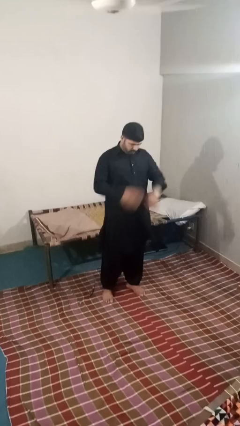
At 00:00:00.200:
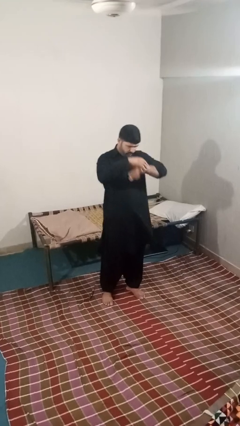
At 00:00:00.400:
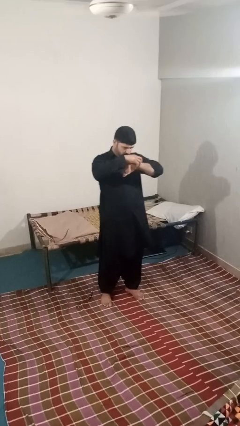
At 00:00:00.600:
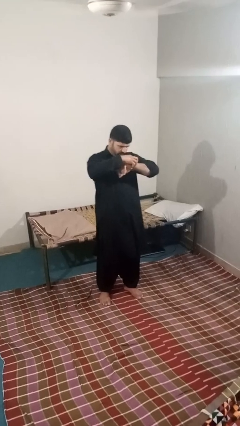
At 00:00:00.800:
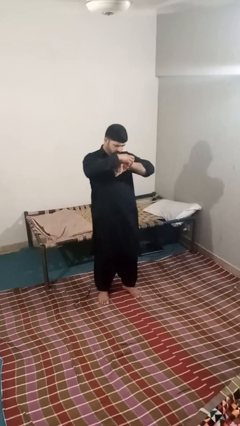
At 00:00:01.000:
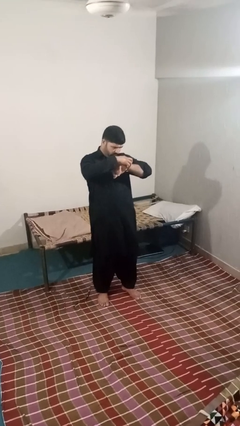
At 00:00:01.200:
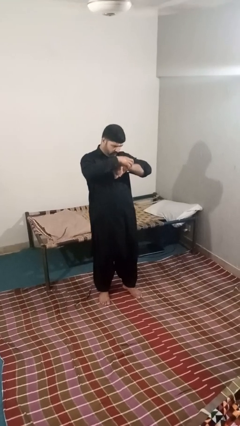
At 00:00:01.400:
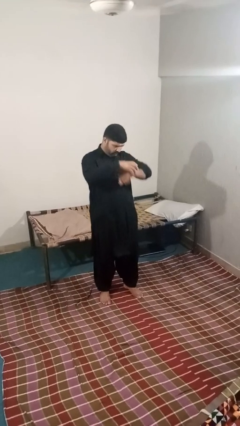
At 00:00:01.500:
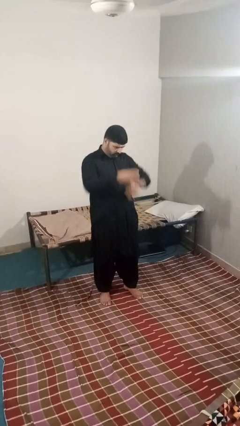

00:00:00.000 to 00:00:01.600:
person looks at wristwatch

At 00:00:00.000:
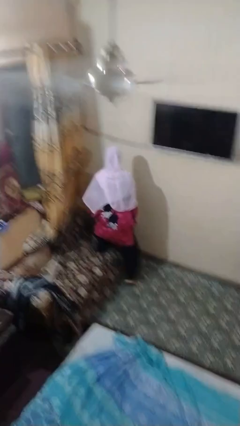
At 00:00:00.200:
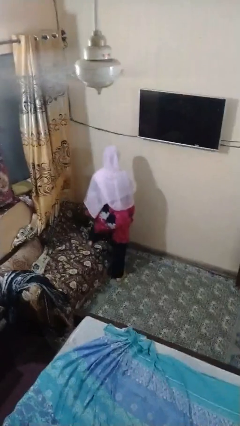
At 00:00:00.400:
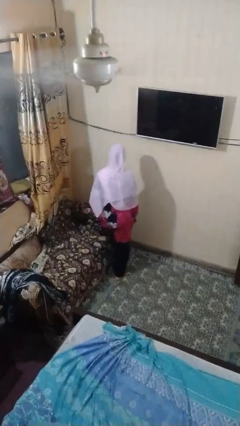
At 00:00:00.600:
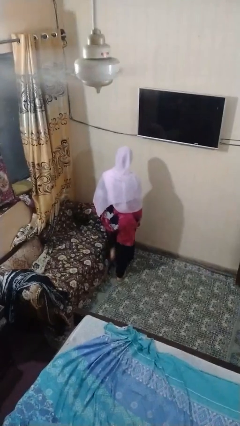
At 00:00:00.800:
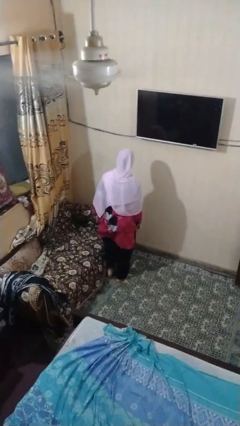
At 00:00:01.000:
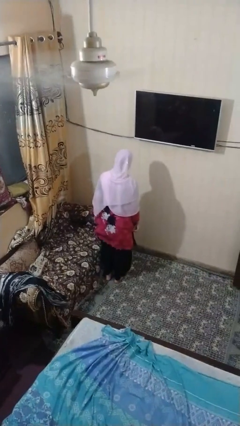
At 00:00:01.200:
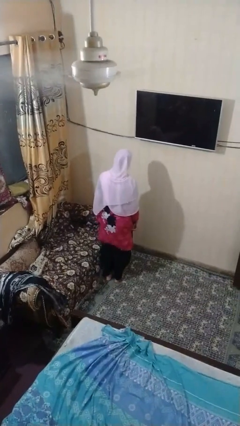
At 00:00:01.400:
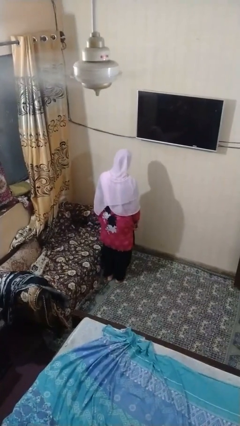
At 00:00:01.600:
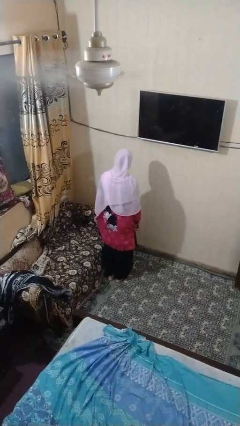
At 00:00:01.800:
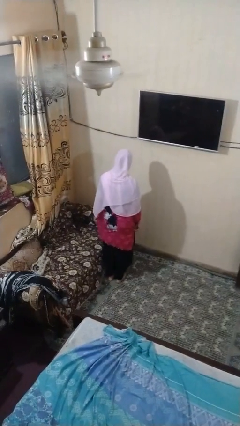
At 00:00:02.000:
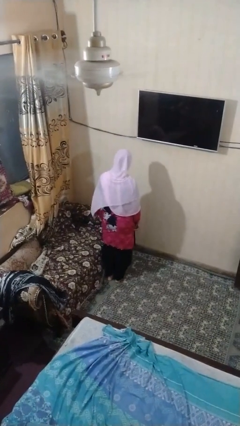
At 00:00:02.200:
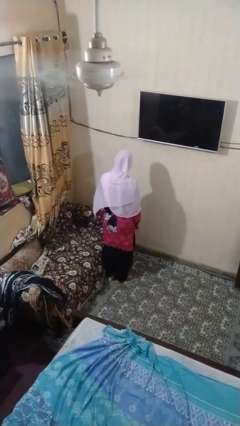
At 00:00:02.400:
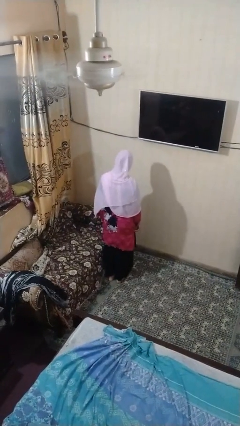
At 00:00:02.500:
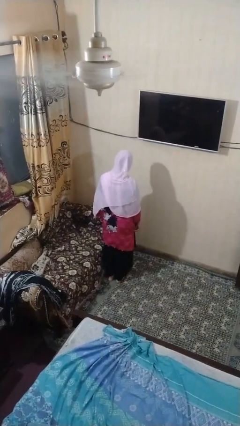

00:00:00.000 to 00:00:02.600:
person climbs off couch

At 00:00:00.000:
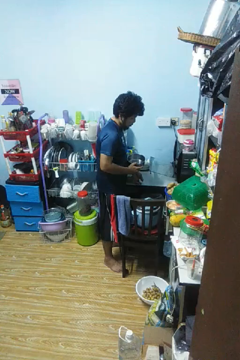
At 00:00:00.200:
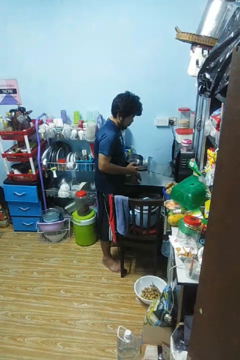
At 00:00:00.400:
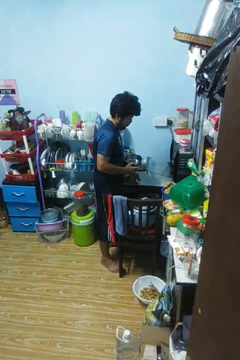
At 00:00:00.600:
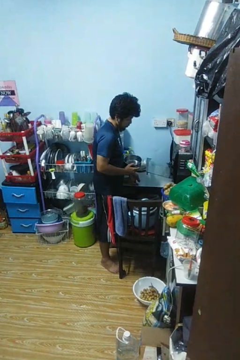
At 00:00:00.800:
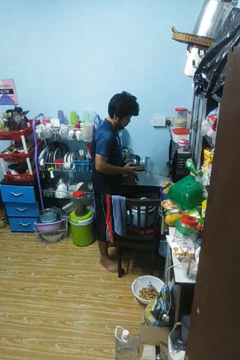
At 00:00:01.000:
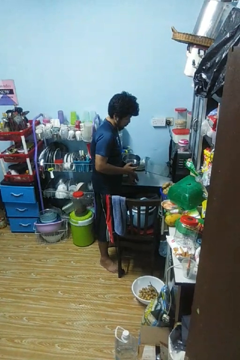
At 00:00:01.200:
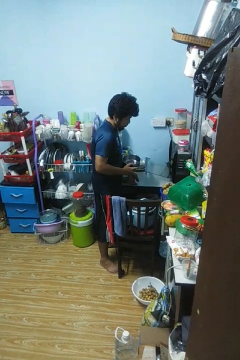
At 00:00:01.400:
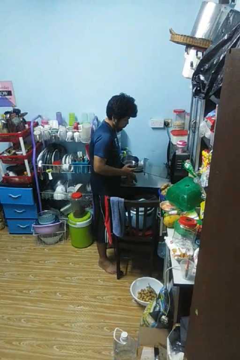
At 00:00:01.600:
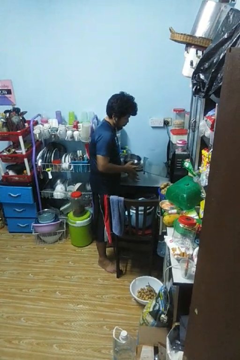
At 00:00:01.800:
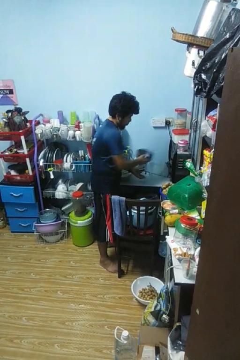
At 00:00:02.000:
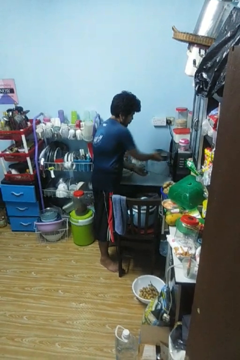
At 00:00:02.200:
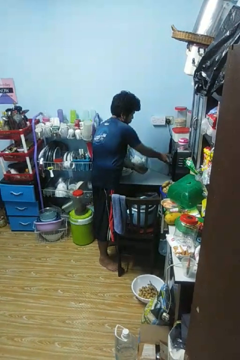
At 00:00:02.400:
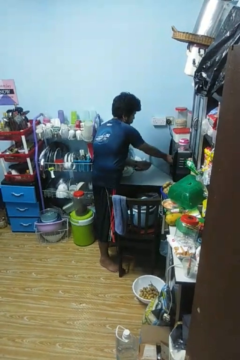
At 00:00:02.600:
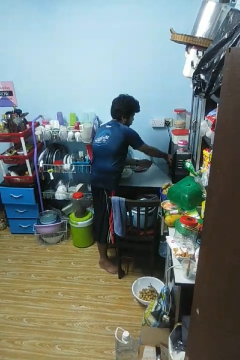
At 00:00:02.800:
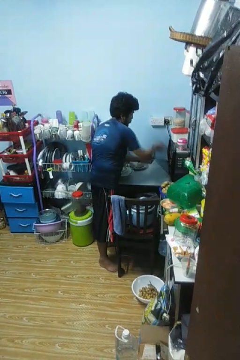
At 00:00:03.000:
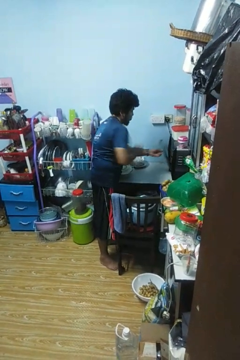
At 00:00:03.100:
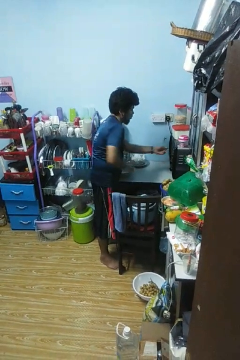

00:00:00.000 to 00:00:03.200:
person puts object into oven

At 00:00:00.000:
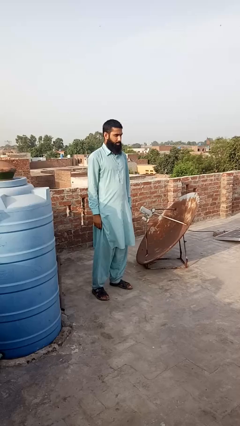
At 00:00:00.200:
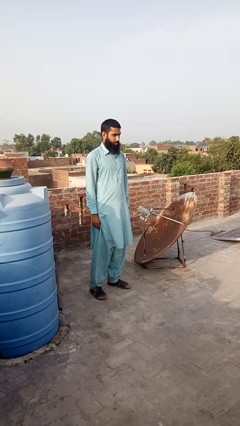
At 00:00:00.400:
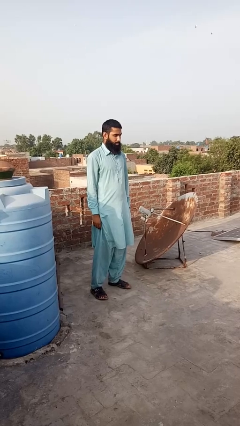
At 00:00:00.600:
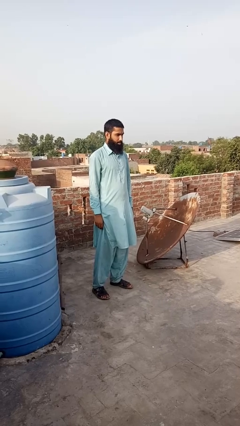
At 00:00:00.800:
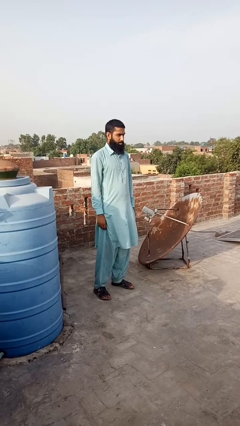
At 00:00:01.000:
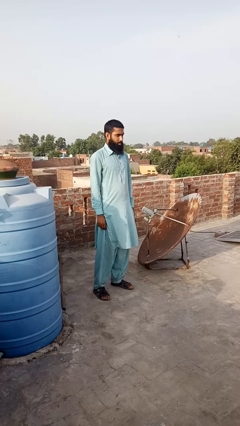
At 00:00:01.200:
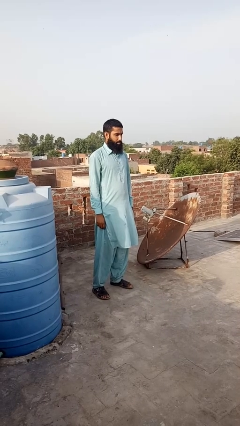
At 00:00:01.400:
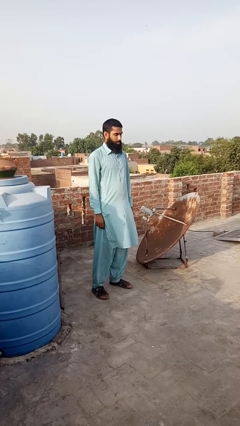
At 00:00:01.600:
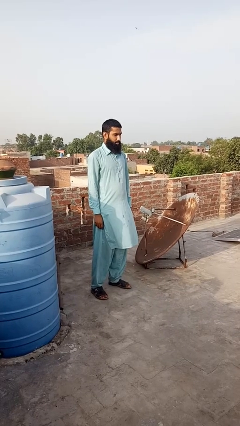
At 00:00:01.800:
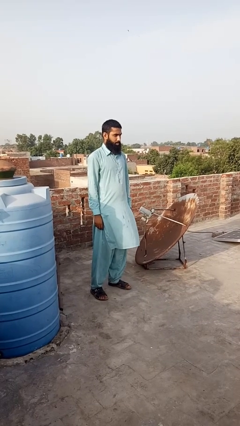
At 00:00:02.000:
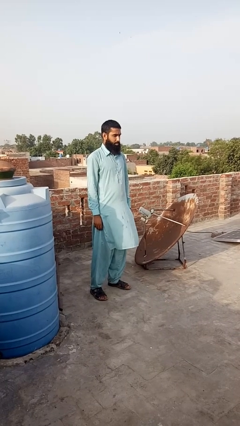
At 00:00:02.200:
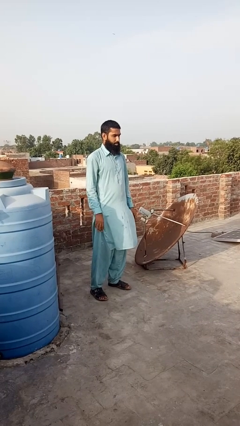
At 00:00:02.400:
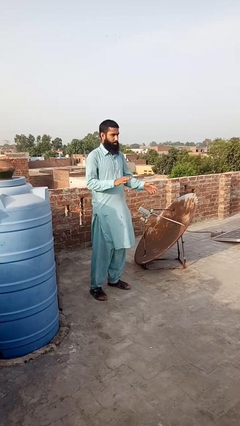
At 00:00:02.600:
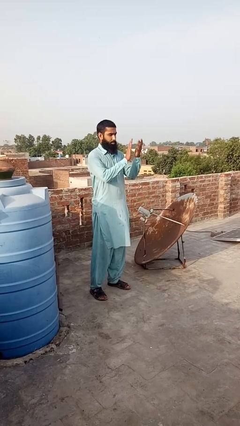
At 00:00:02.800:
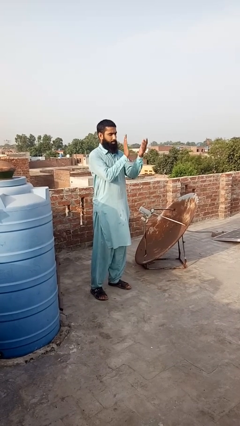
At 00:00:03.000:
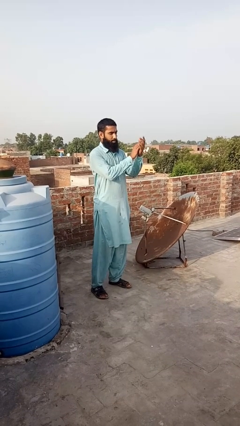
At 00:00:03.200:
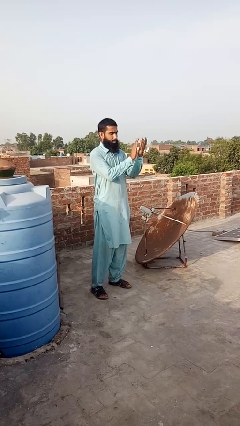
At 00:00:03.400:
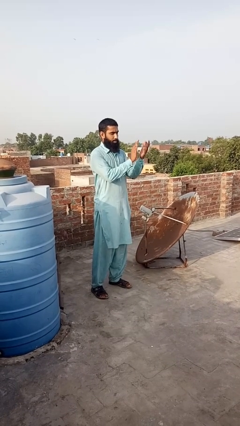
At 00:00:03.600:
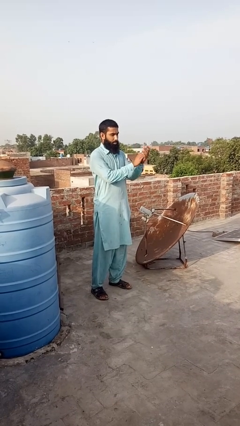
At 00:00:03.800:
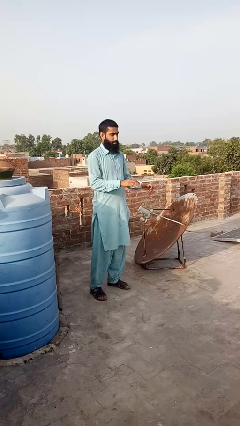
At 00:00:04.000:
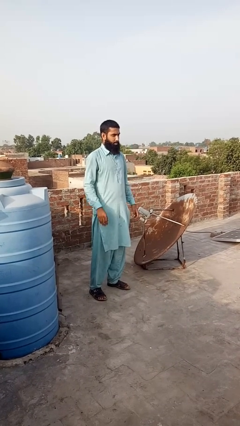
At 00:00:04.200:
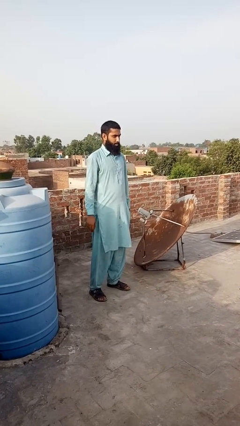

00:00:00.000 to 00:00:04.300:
person claps hands

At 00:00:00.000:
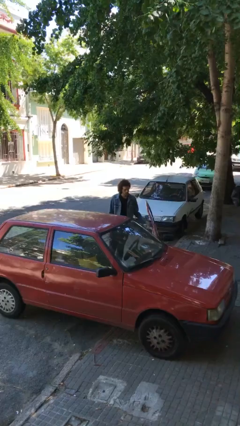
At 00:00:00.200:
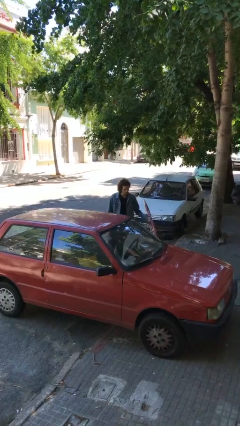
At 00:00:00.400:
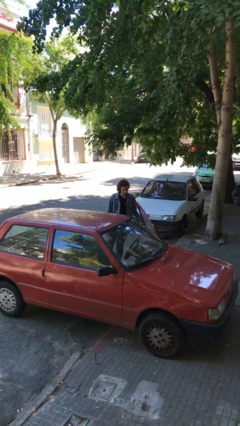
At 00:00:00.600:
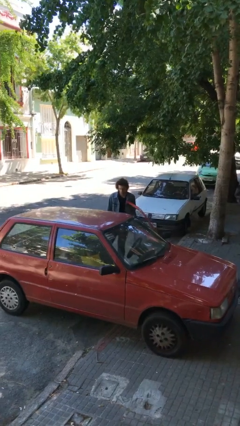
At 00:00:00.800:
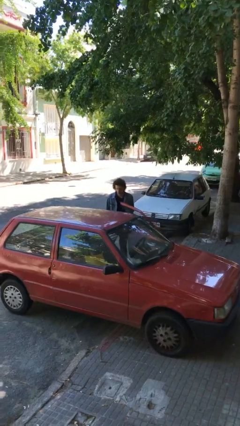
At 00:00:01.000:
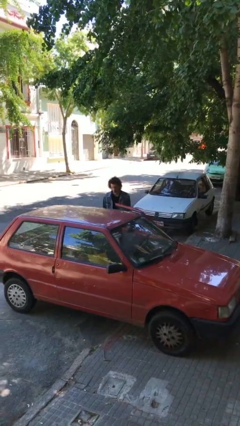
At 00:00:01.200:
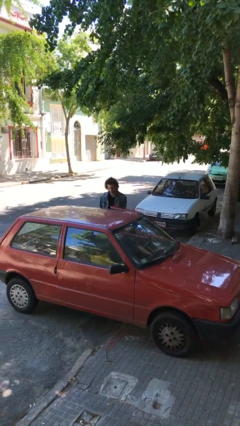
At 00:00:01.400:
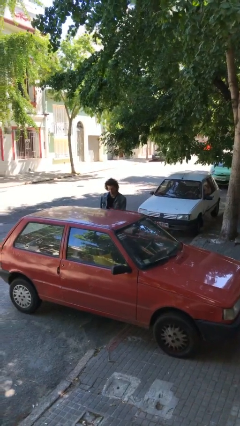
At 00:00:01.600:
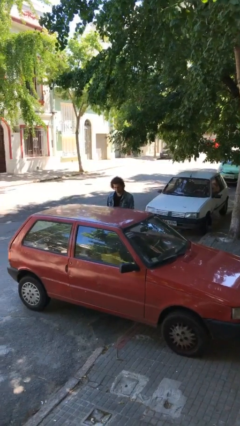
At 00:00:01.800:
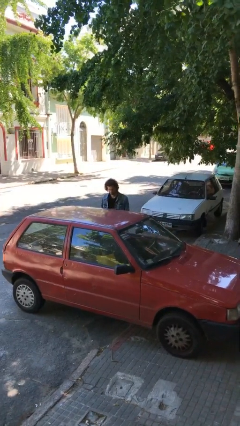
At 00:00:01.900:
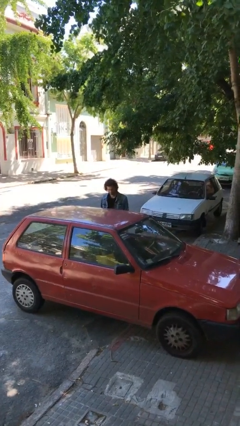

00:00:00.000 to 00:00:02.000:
person closes car door

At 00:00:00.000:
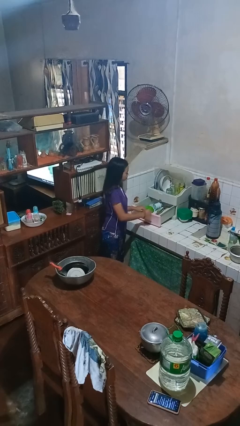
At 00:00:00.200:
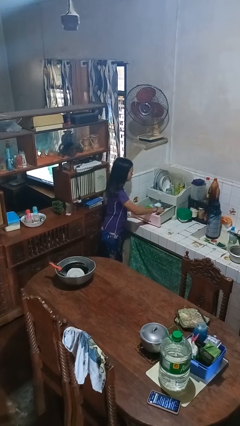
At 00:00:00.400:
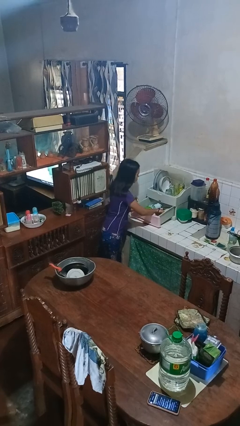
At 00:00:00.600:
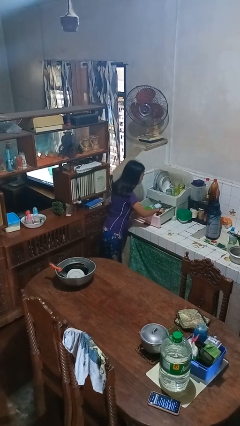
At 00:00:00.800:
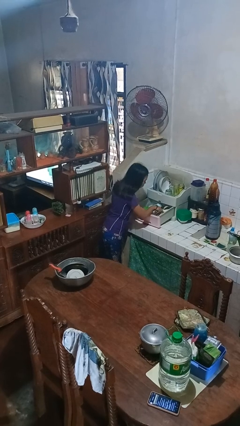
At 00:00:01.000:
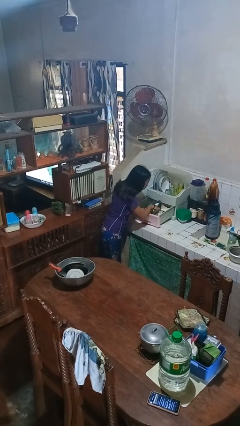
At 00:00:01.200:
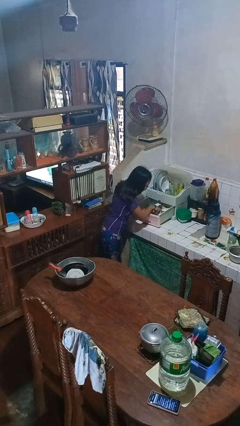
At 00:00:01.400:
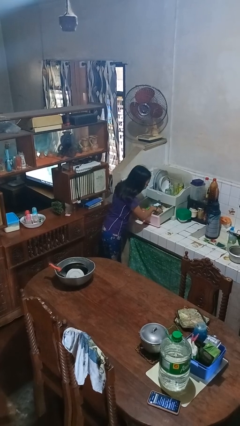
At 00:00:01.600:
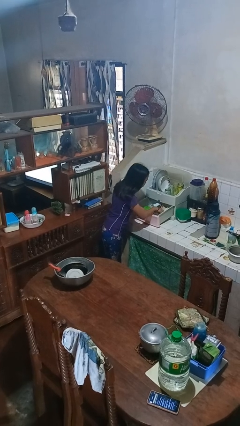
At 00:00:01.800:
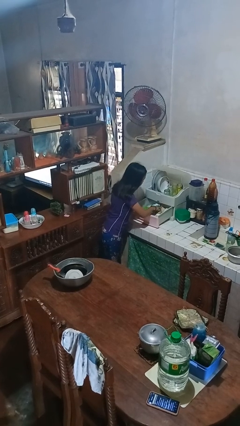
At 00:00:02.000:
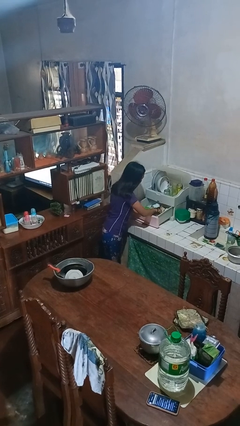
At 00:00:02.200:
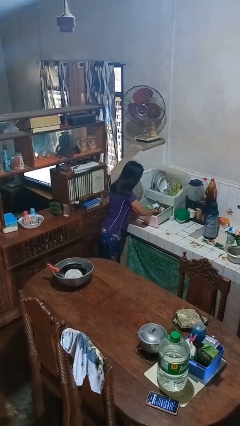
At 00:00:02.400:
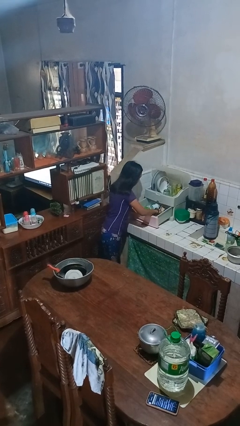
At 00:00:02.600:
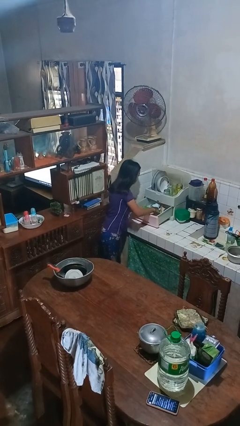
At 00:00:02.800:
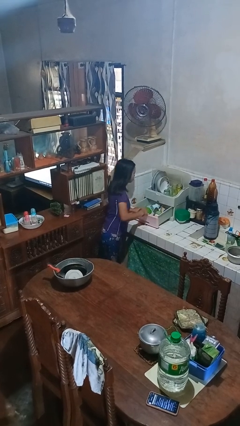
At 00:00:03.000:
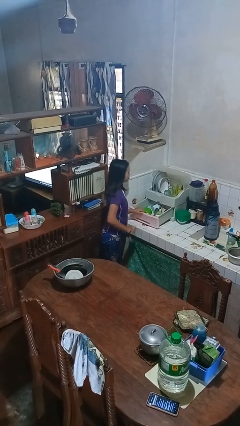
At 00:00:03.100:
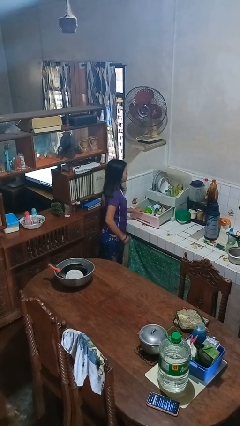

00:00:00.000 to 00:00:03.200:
person searches in kitchen drawer

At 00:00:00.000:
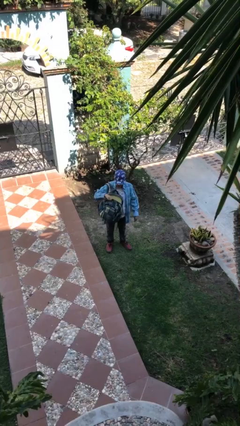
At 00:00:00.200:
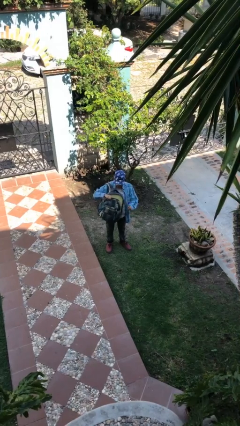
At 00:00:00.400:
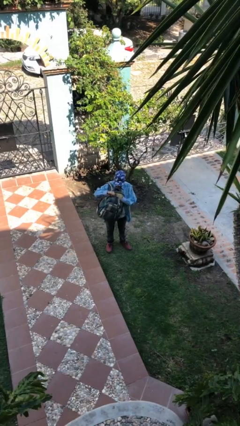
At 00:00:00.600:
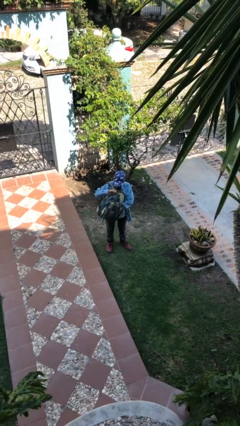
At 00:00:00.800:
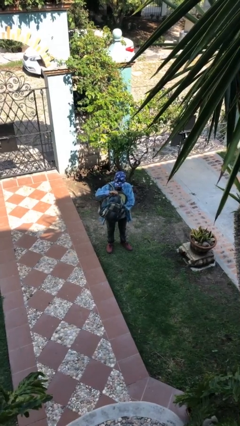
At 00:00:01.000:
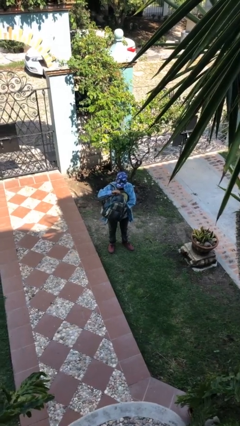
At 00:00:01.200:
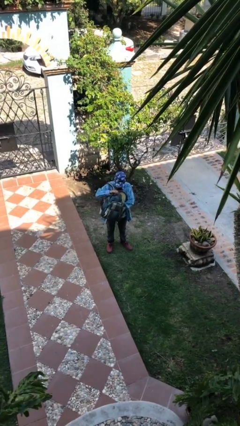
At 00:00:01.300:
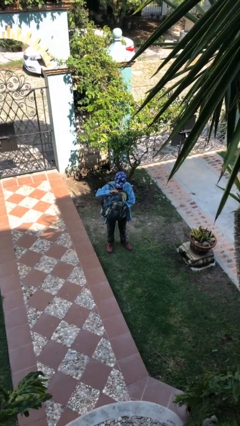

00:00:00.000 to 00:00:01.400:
person searches in backpack
